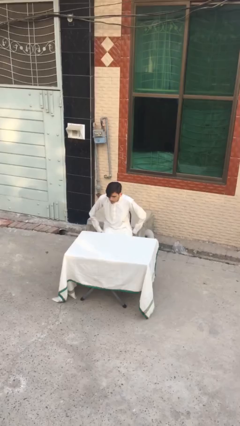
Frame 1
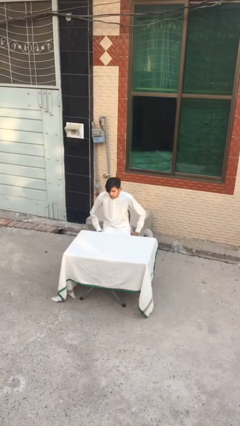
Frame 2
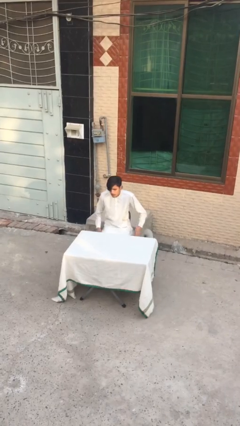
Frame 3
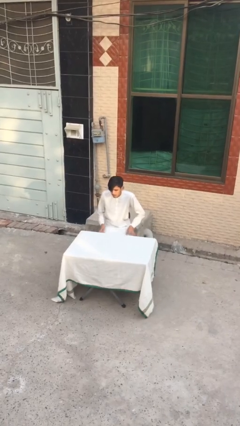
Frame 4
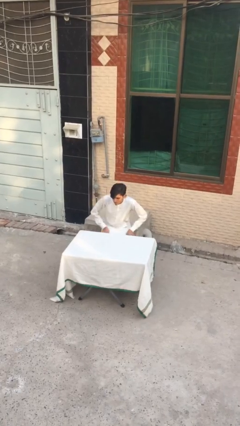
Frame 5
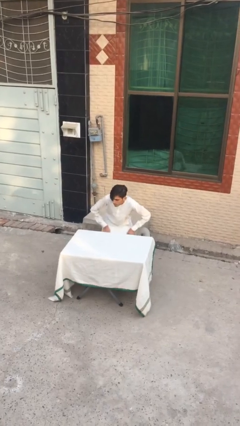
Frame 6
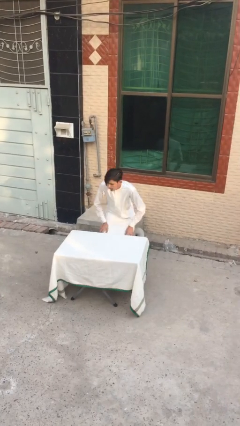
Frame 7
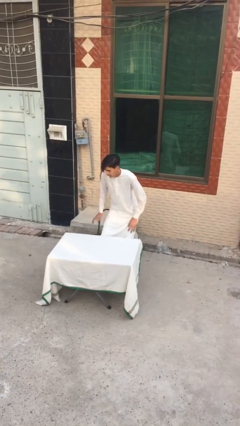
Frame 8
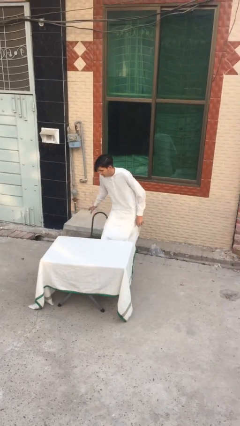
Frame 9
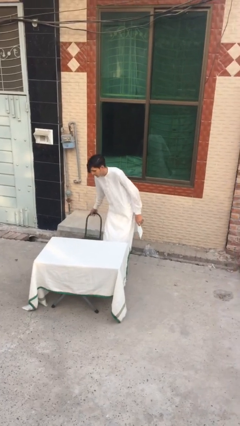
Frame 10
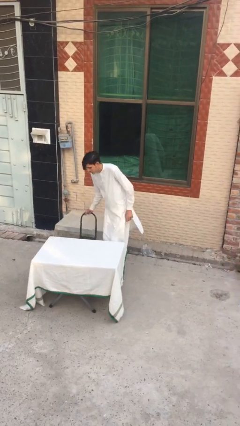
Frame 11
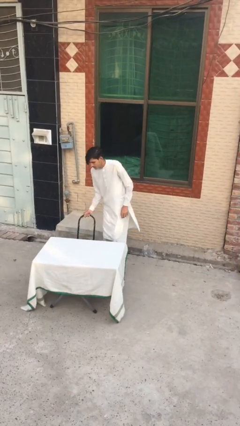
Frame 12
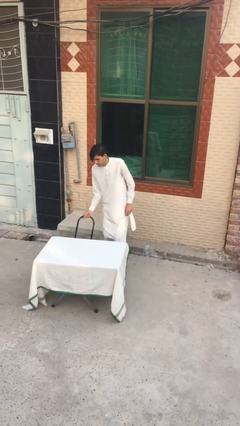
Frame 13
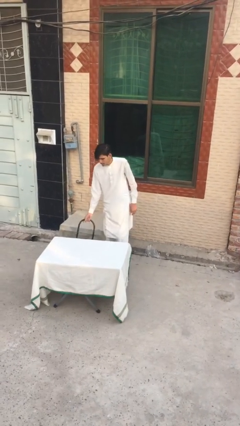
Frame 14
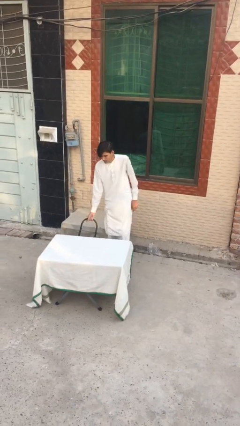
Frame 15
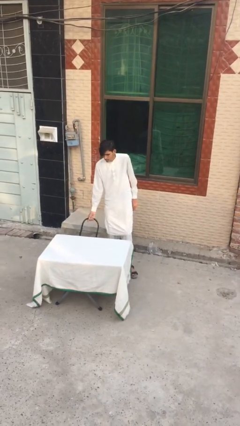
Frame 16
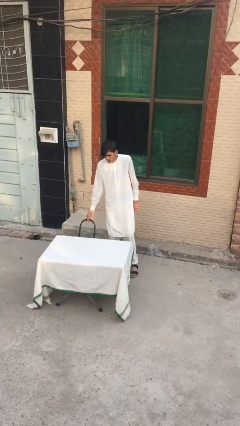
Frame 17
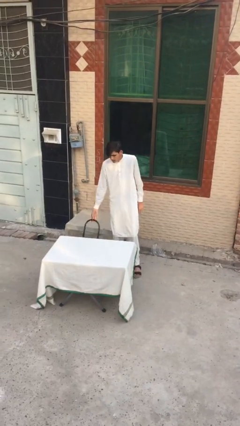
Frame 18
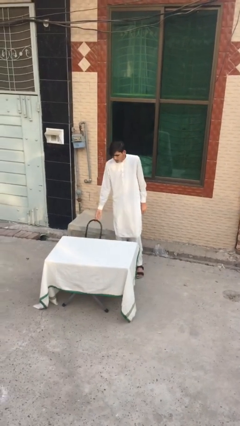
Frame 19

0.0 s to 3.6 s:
person stands up

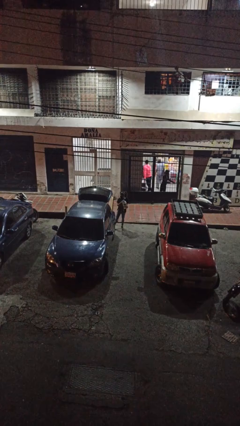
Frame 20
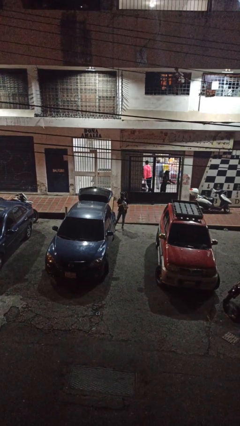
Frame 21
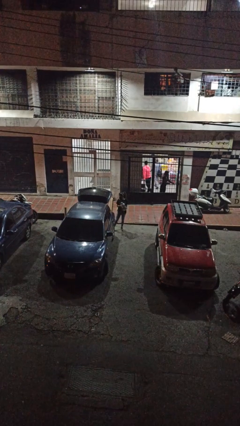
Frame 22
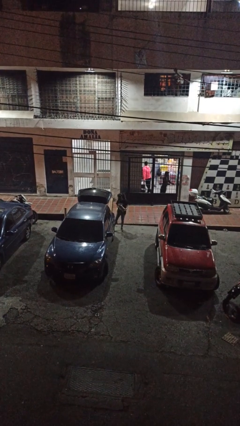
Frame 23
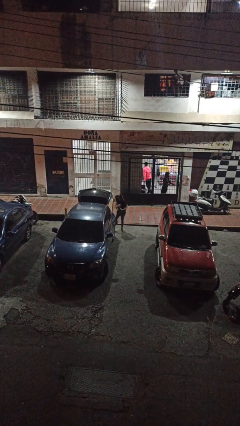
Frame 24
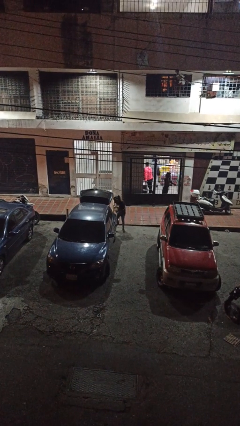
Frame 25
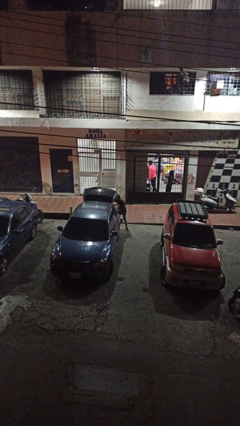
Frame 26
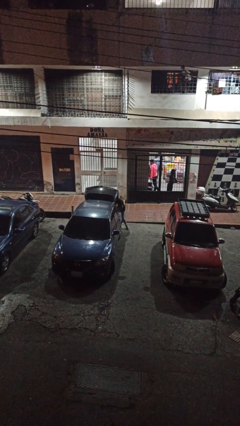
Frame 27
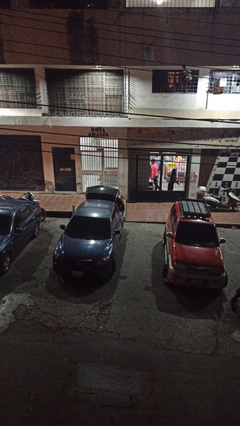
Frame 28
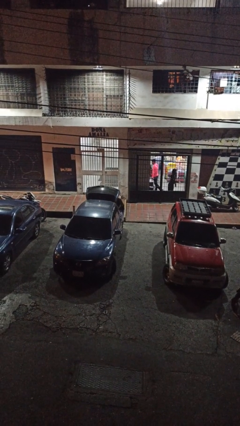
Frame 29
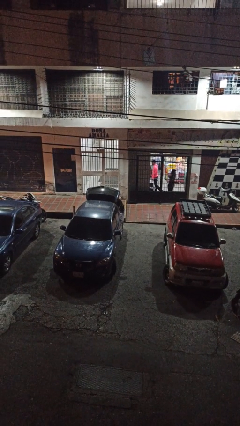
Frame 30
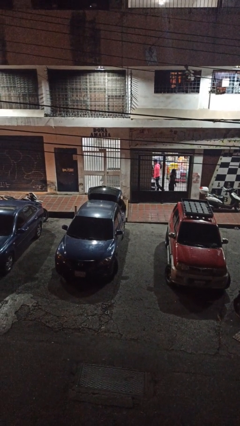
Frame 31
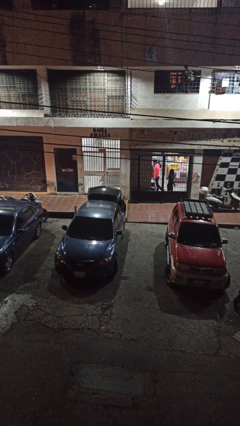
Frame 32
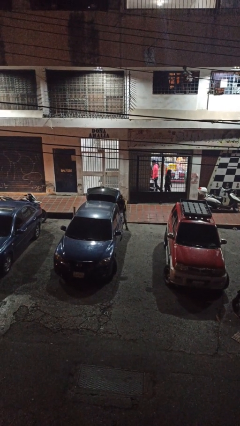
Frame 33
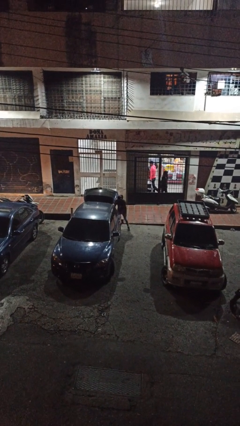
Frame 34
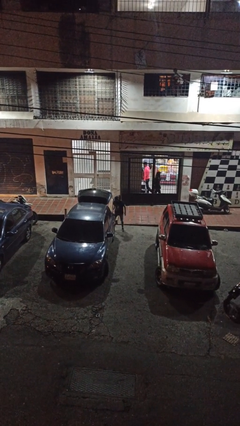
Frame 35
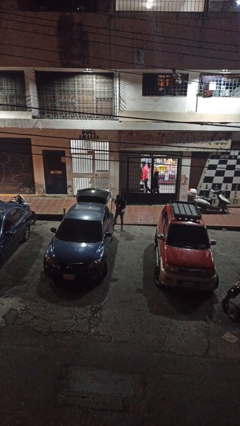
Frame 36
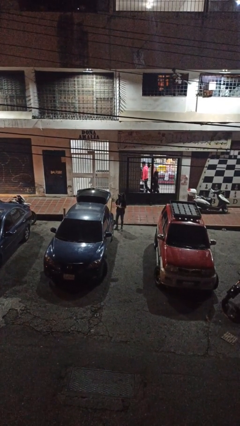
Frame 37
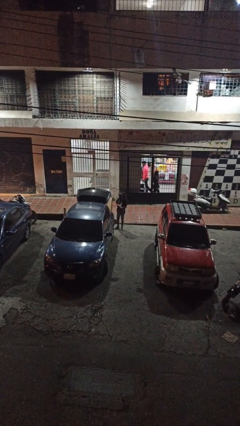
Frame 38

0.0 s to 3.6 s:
person loads car

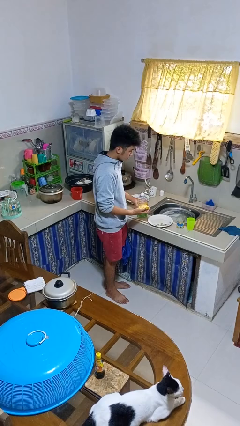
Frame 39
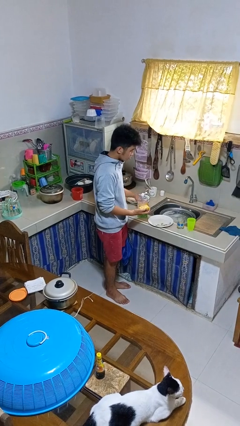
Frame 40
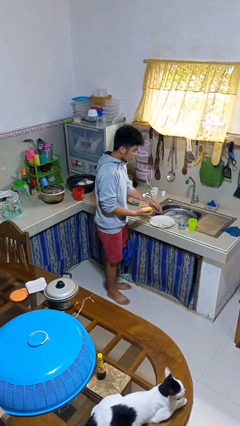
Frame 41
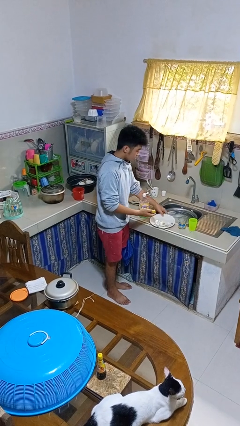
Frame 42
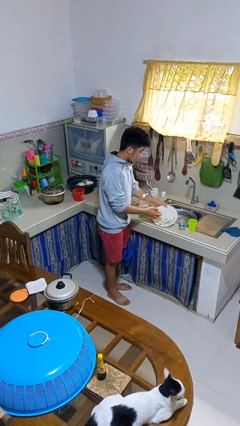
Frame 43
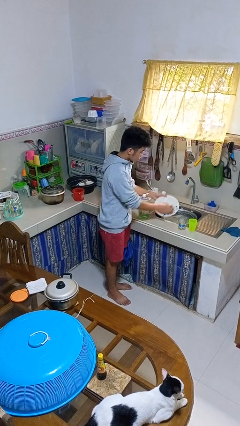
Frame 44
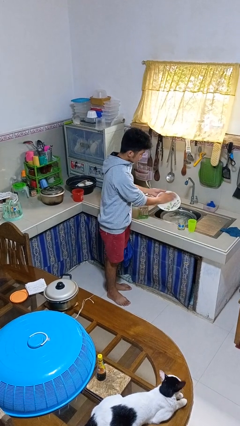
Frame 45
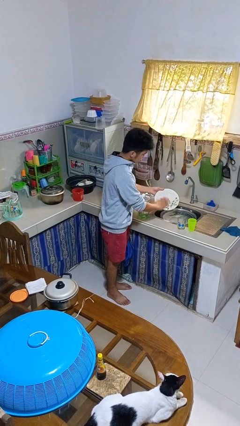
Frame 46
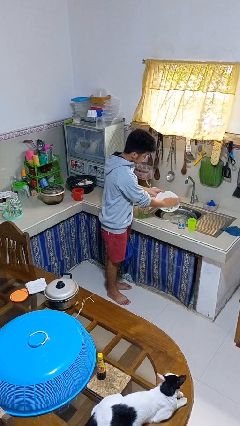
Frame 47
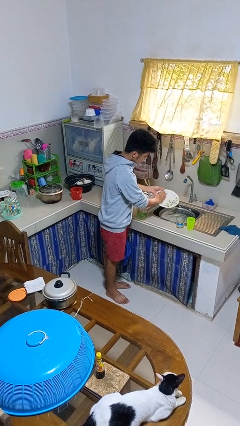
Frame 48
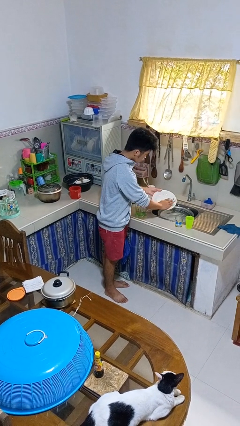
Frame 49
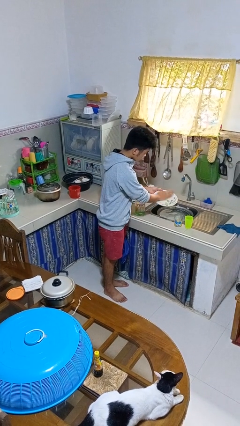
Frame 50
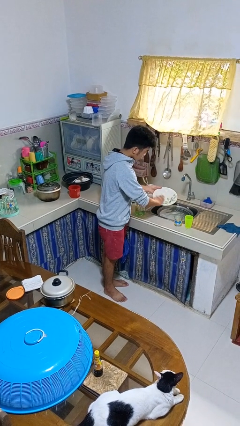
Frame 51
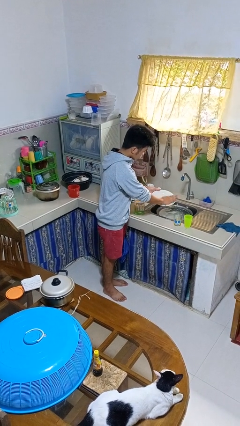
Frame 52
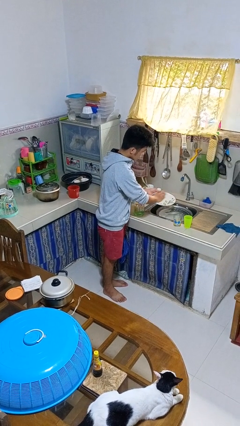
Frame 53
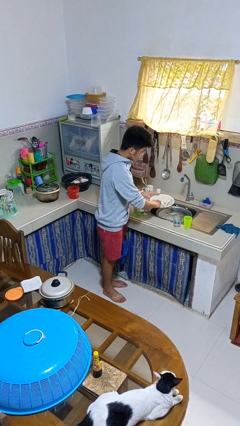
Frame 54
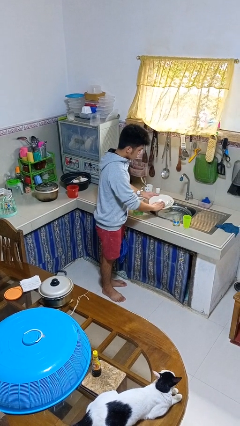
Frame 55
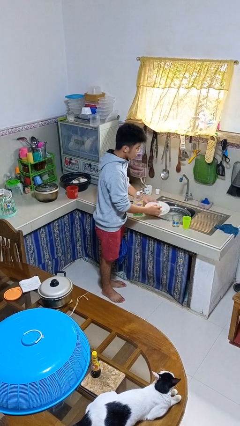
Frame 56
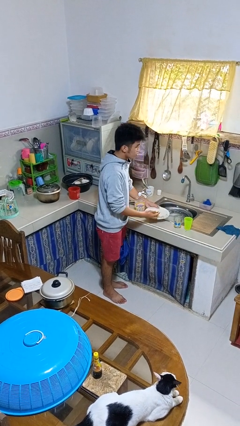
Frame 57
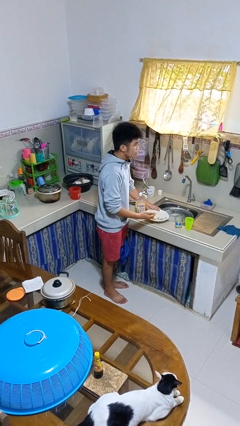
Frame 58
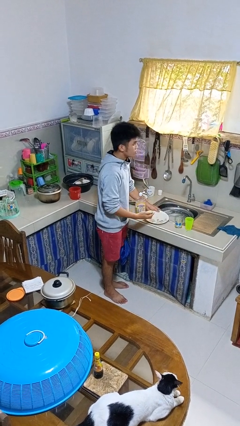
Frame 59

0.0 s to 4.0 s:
person washes dish

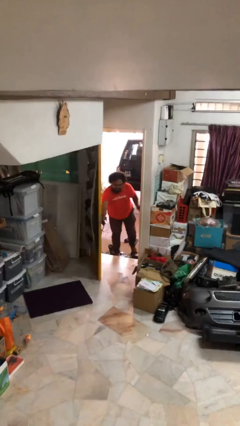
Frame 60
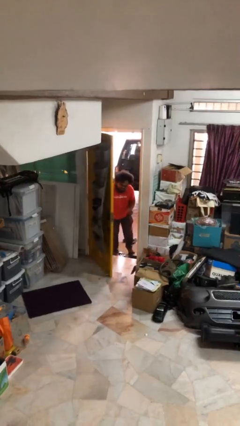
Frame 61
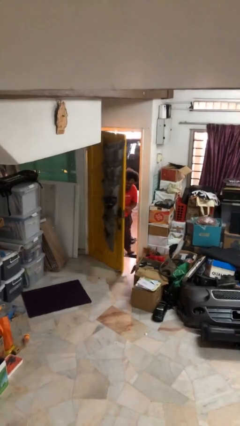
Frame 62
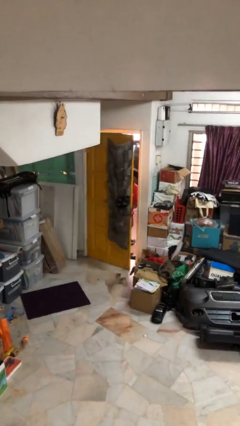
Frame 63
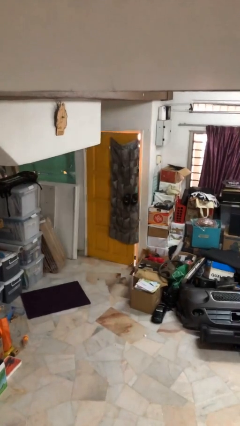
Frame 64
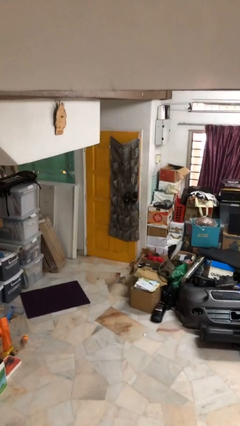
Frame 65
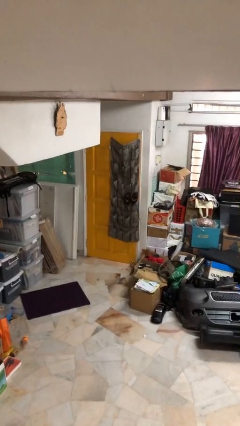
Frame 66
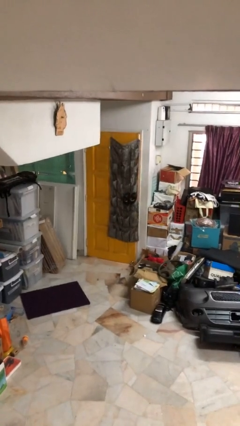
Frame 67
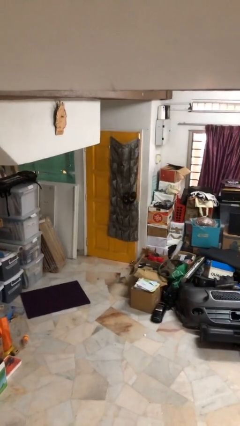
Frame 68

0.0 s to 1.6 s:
person closes facility door

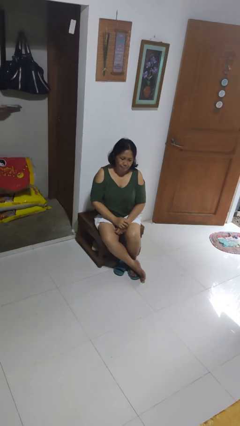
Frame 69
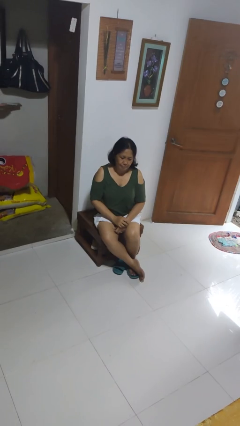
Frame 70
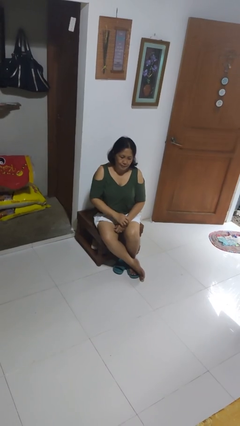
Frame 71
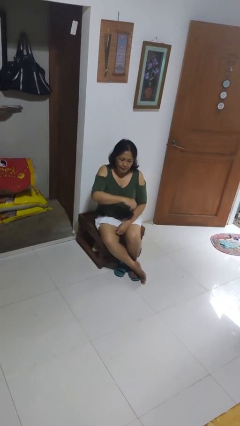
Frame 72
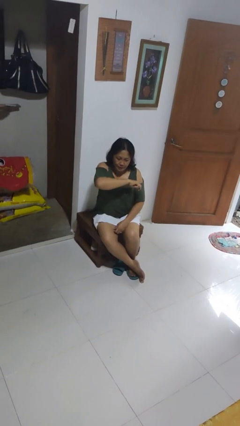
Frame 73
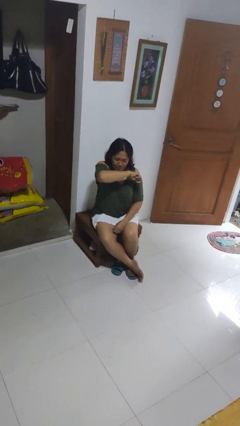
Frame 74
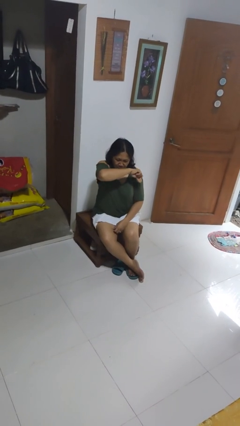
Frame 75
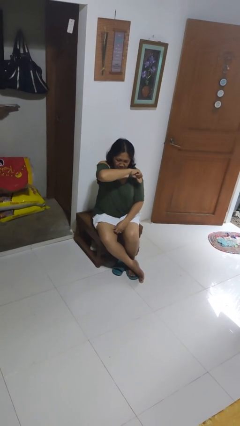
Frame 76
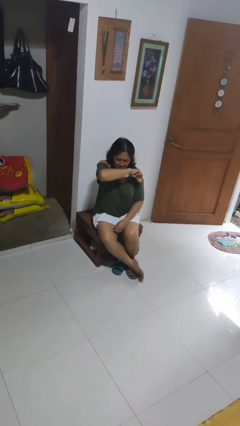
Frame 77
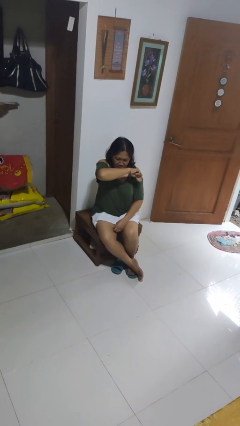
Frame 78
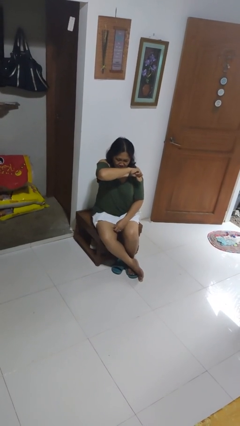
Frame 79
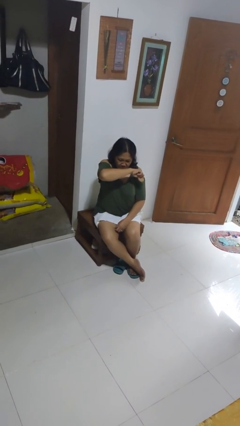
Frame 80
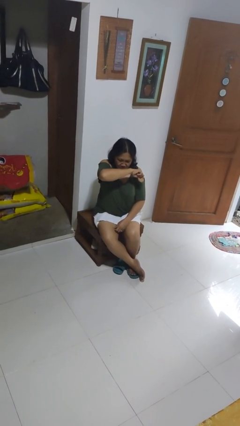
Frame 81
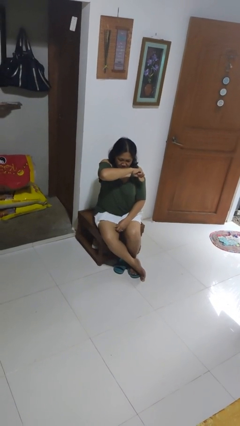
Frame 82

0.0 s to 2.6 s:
person sneezes into arm

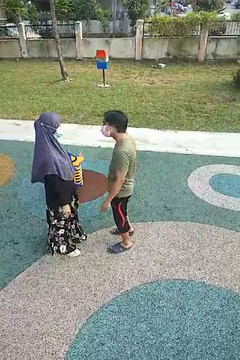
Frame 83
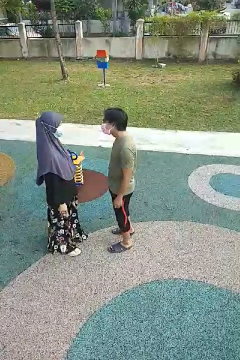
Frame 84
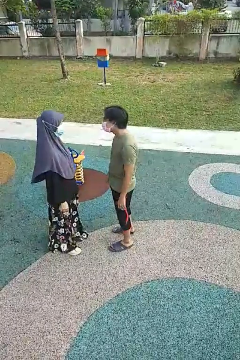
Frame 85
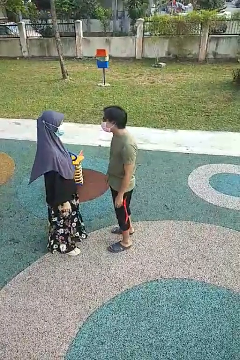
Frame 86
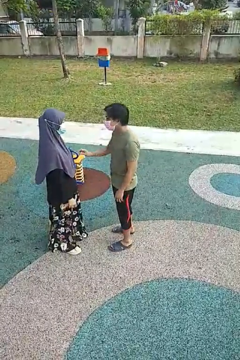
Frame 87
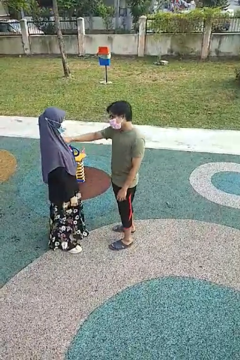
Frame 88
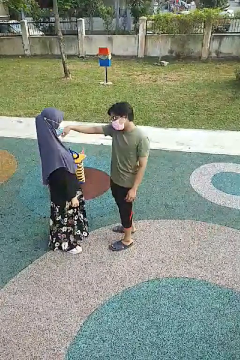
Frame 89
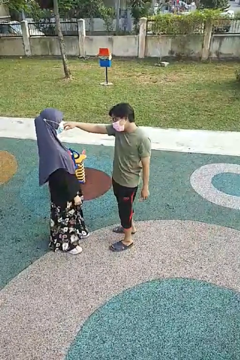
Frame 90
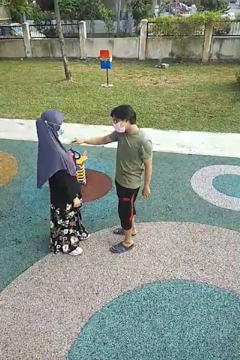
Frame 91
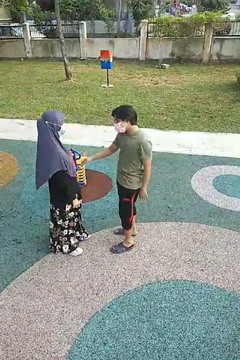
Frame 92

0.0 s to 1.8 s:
person shoves person

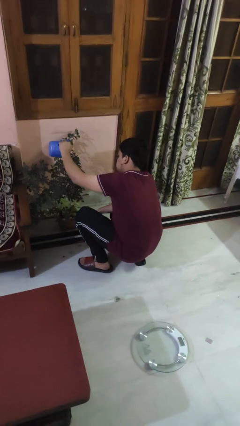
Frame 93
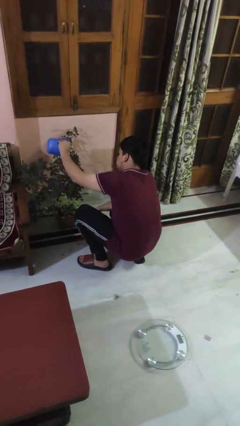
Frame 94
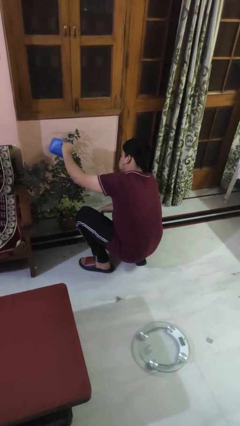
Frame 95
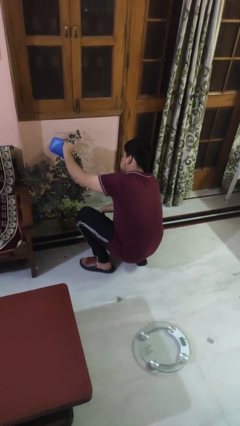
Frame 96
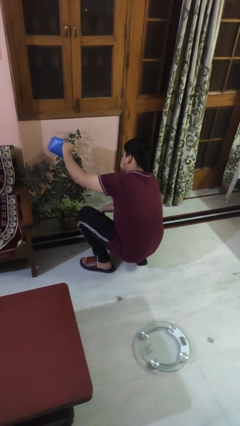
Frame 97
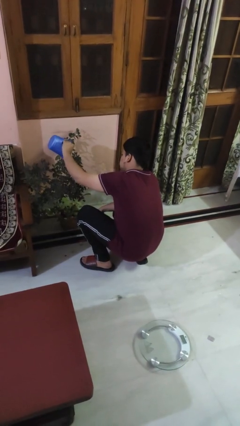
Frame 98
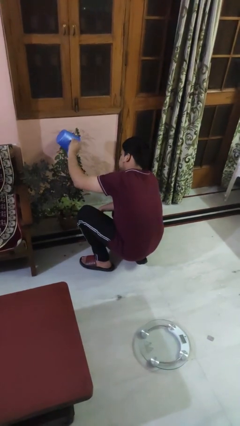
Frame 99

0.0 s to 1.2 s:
person waters houseplant
